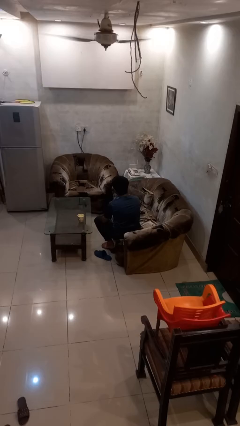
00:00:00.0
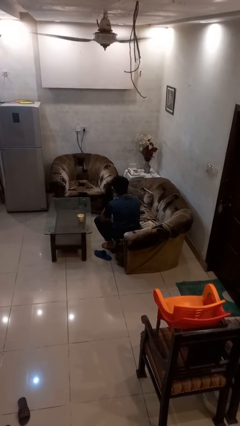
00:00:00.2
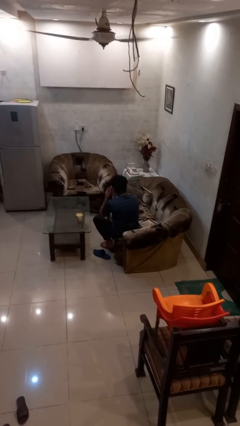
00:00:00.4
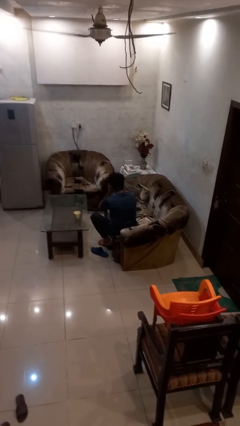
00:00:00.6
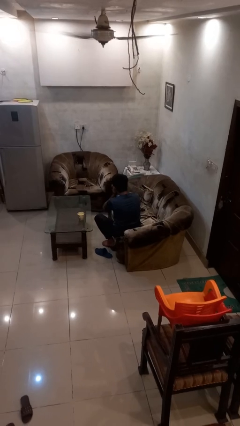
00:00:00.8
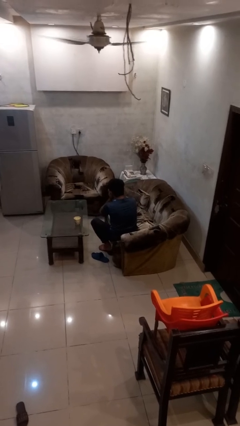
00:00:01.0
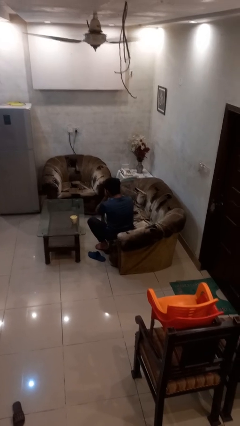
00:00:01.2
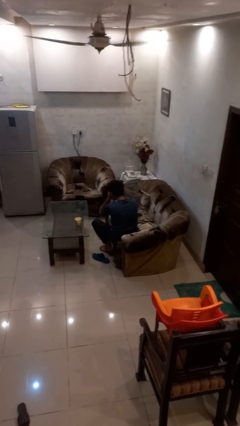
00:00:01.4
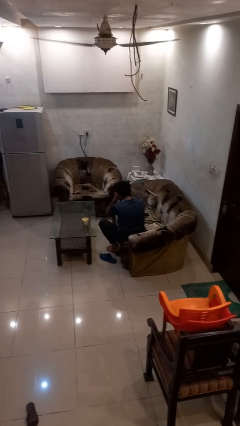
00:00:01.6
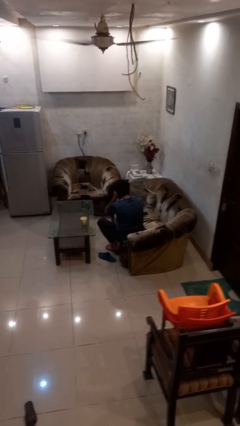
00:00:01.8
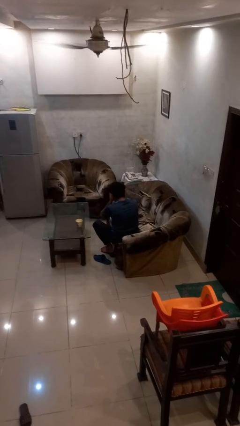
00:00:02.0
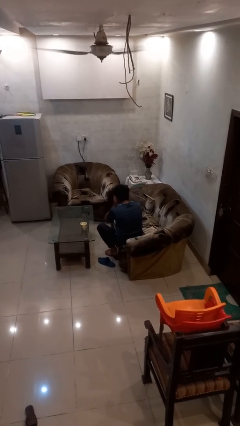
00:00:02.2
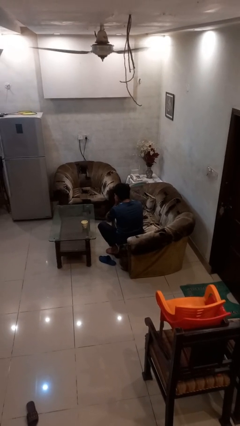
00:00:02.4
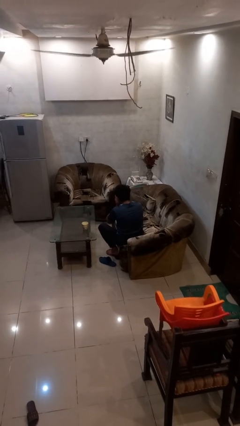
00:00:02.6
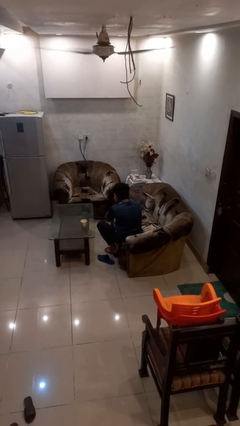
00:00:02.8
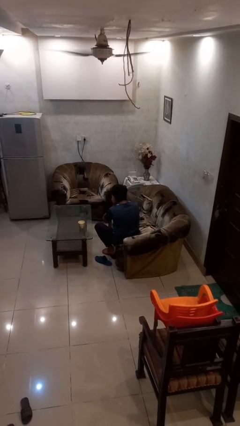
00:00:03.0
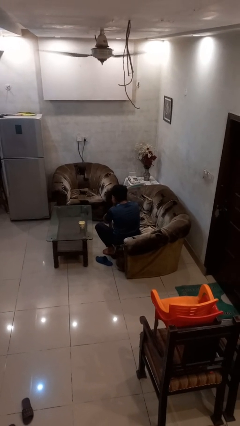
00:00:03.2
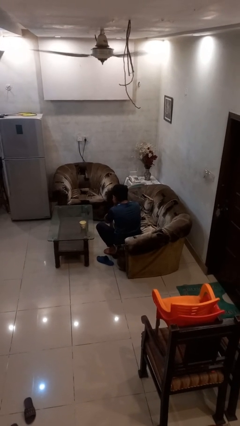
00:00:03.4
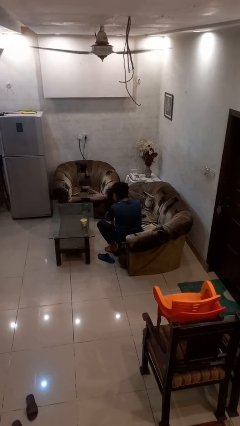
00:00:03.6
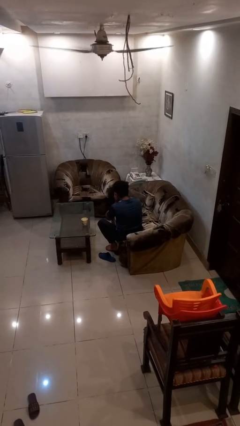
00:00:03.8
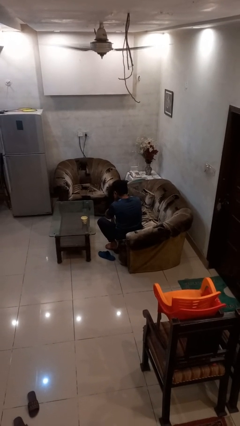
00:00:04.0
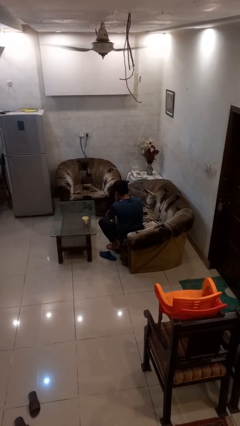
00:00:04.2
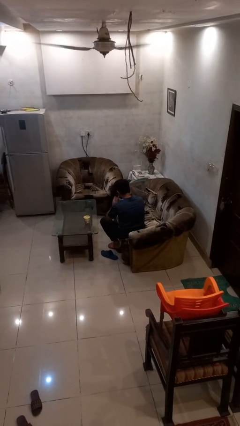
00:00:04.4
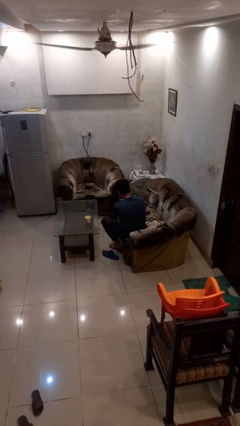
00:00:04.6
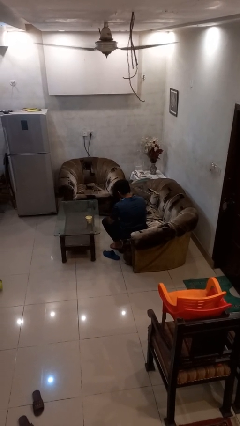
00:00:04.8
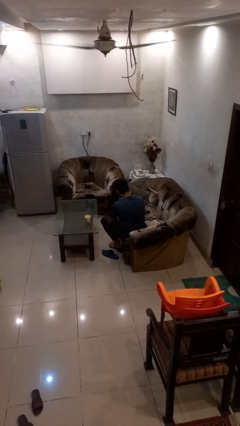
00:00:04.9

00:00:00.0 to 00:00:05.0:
person covers face with hands

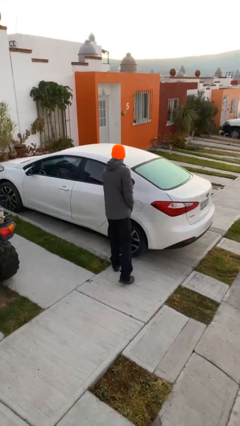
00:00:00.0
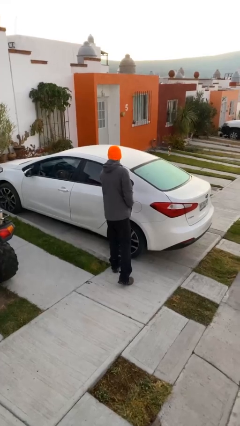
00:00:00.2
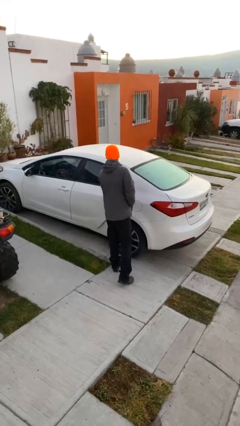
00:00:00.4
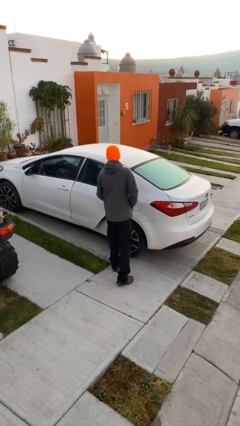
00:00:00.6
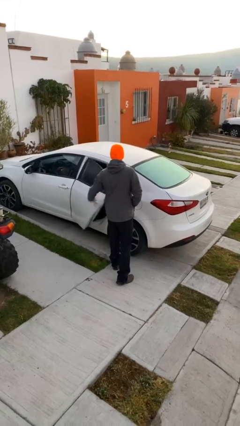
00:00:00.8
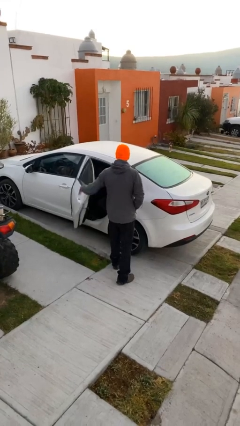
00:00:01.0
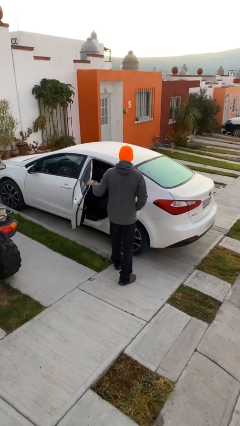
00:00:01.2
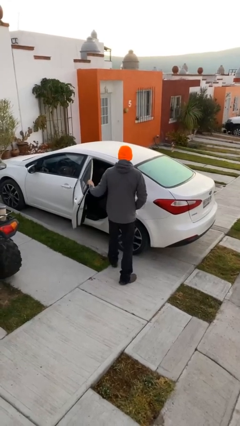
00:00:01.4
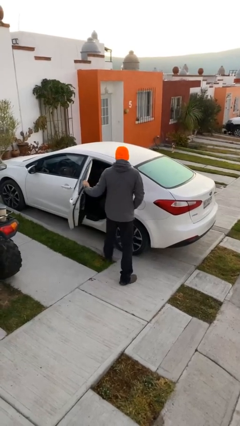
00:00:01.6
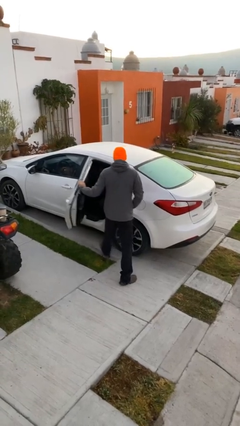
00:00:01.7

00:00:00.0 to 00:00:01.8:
person opens car door

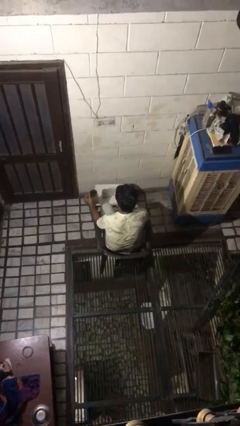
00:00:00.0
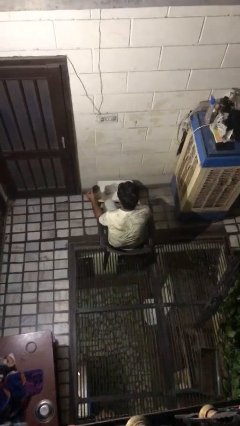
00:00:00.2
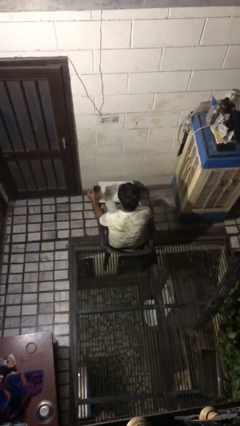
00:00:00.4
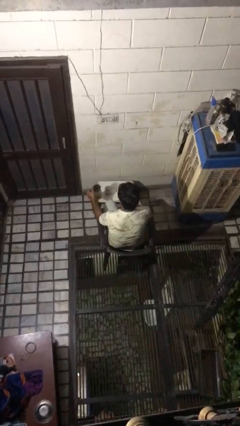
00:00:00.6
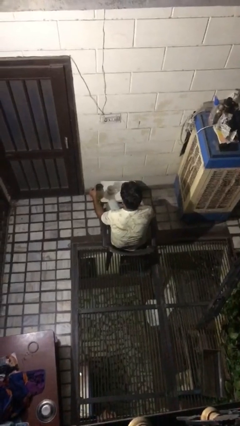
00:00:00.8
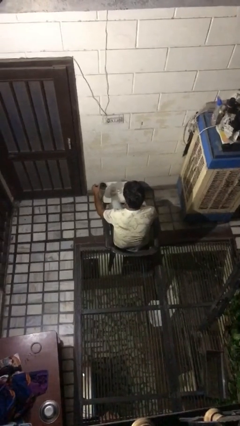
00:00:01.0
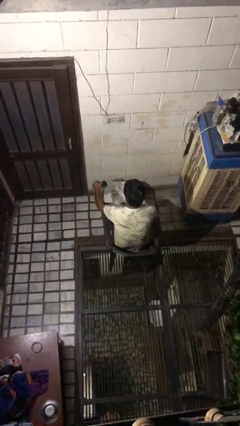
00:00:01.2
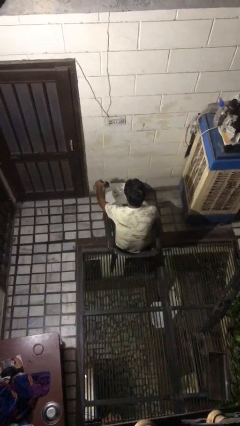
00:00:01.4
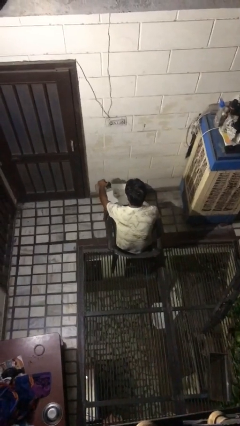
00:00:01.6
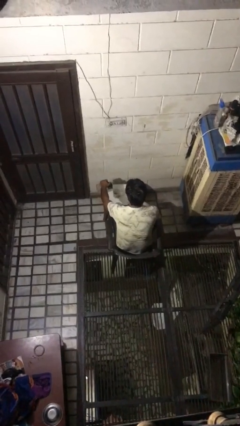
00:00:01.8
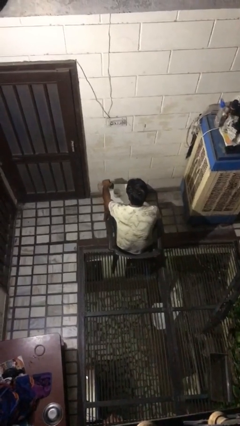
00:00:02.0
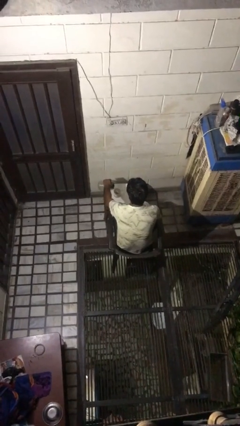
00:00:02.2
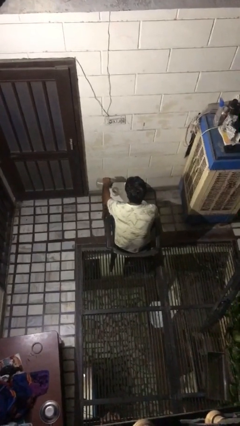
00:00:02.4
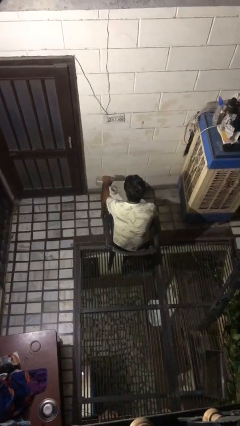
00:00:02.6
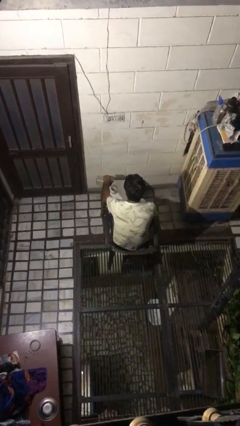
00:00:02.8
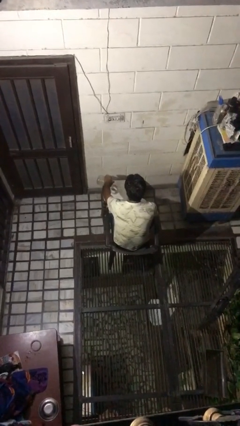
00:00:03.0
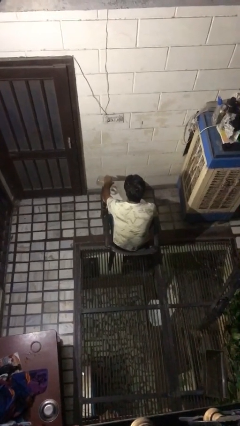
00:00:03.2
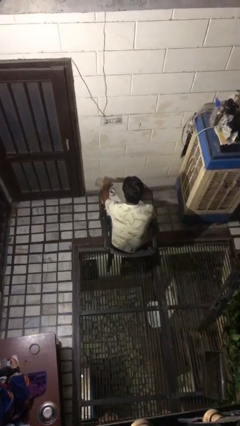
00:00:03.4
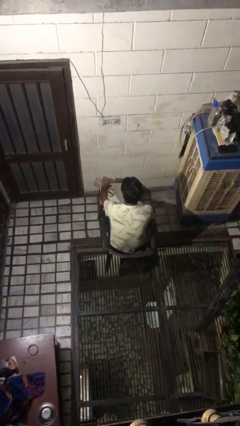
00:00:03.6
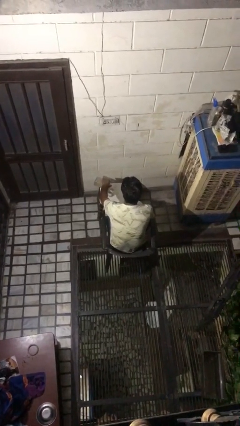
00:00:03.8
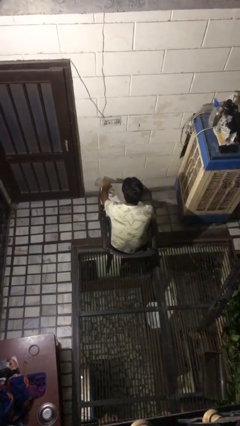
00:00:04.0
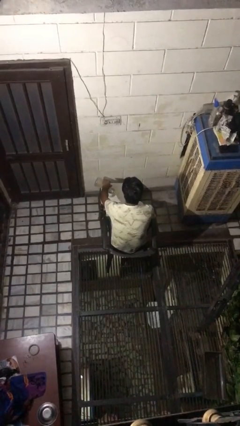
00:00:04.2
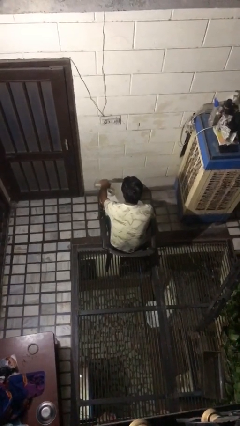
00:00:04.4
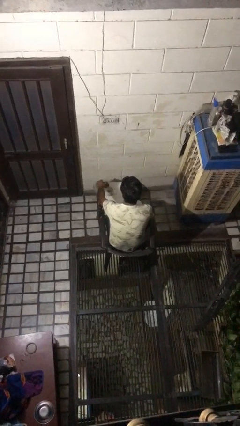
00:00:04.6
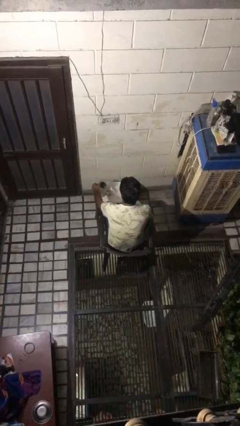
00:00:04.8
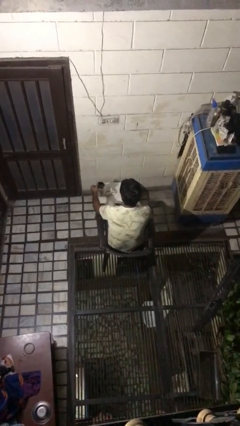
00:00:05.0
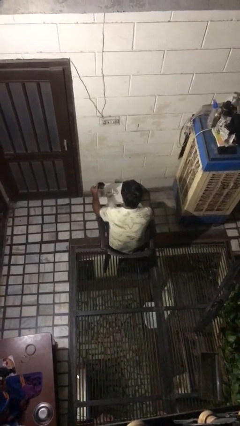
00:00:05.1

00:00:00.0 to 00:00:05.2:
person pours coffee into mug

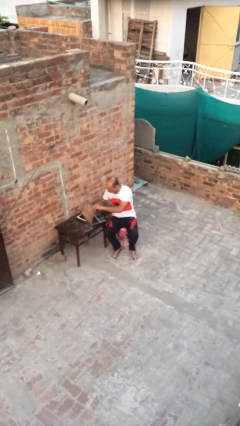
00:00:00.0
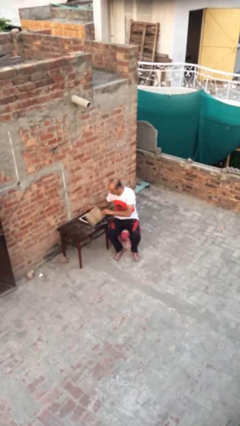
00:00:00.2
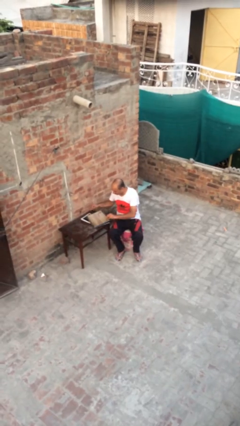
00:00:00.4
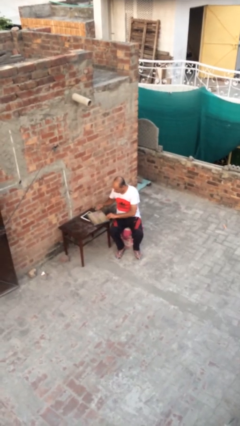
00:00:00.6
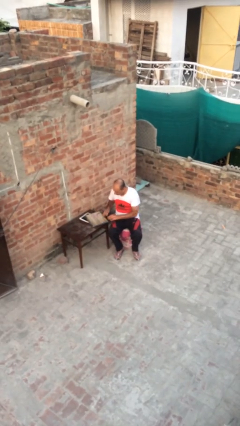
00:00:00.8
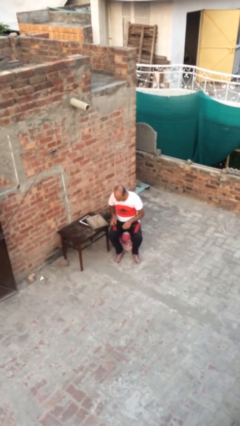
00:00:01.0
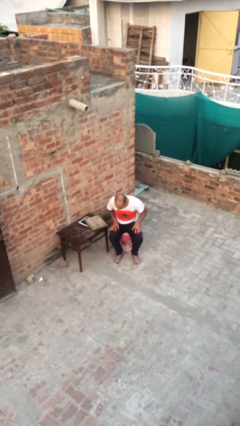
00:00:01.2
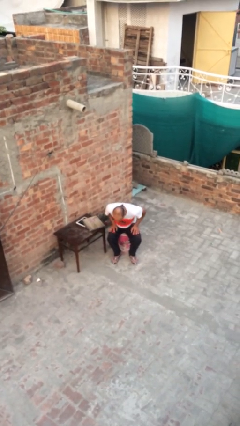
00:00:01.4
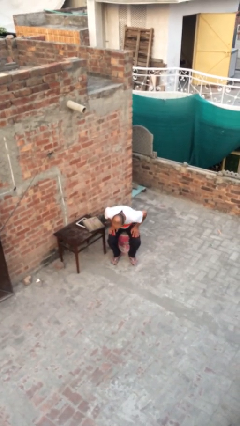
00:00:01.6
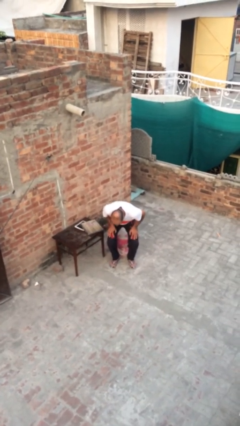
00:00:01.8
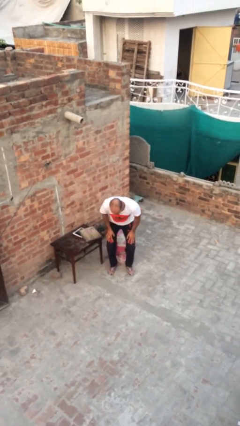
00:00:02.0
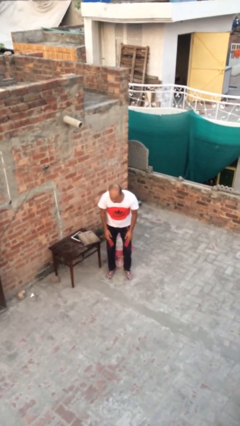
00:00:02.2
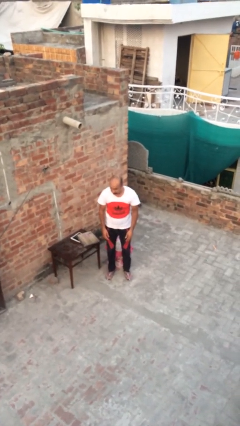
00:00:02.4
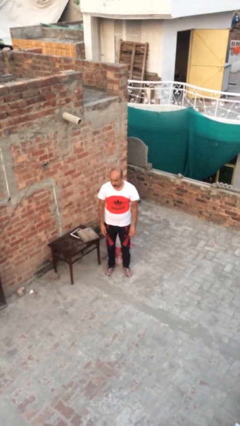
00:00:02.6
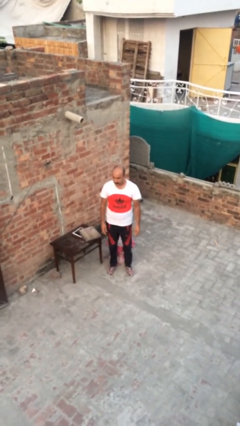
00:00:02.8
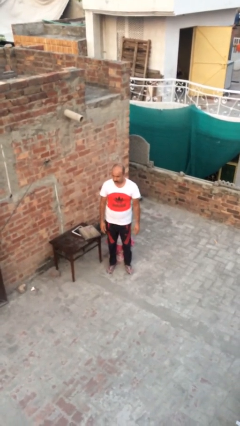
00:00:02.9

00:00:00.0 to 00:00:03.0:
person stands up

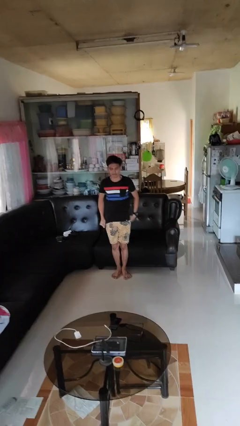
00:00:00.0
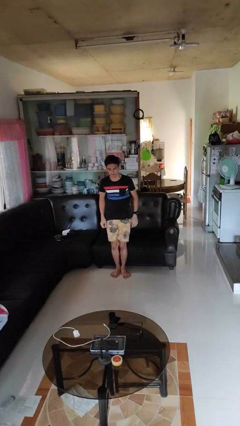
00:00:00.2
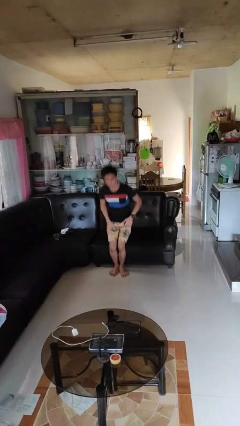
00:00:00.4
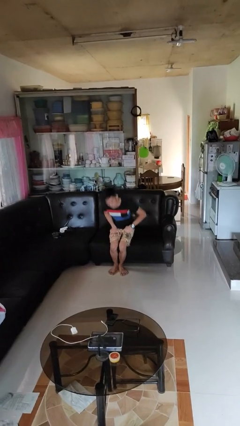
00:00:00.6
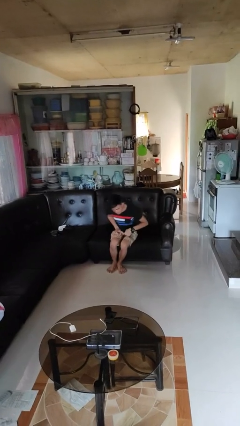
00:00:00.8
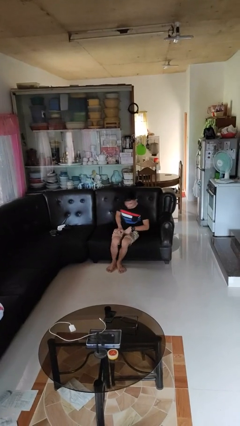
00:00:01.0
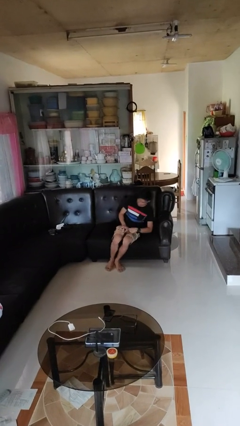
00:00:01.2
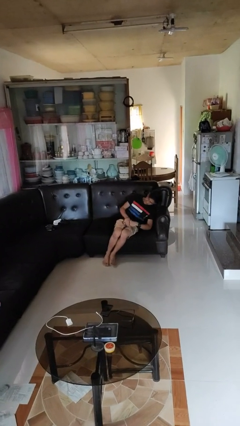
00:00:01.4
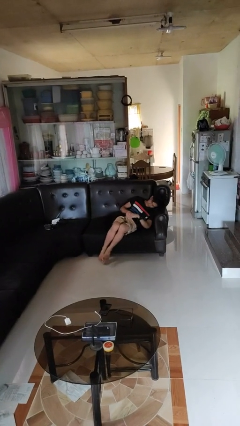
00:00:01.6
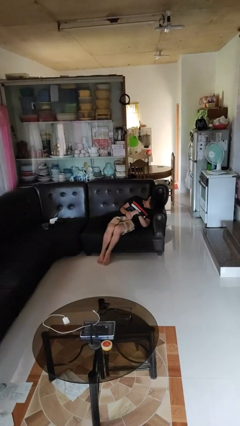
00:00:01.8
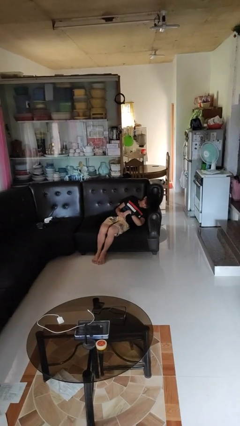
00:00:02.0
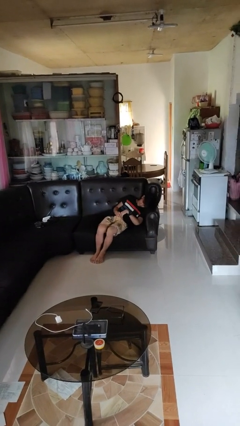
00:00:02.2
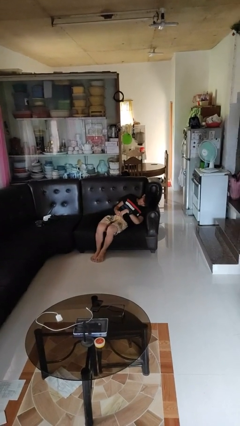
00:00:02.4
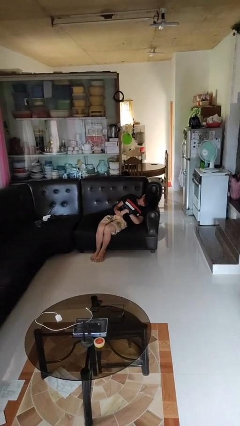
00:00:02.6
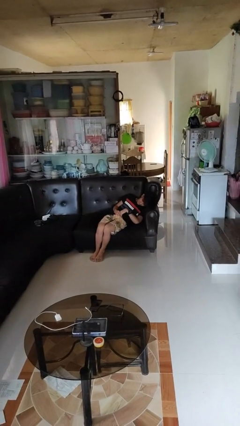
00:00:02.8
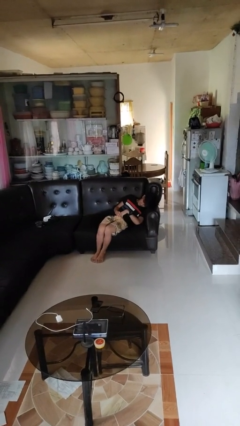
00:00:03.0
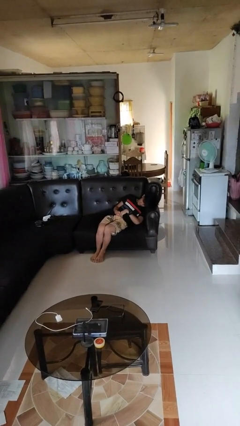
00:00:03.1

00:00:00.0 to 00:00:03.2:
person lies down on couch
